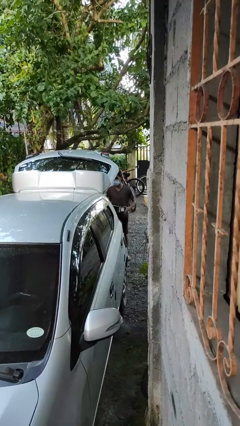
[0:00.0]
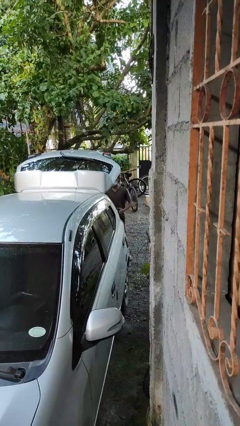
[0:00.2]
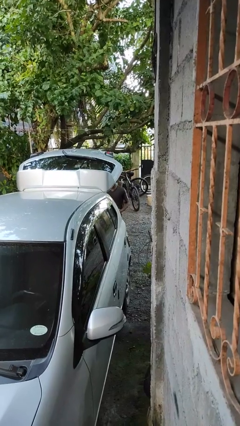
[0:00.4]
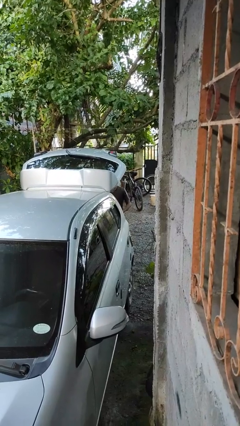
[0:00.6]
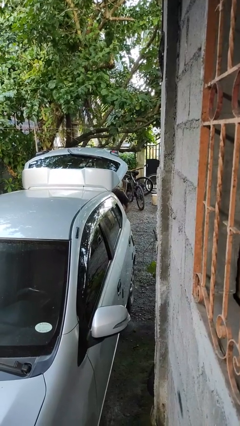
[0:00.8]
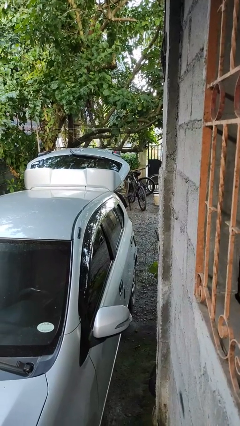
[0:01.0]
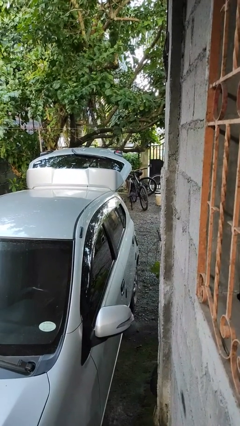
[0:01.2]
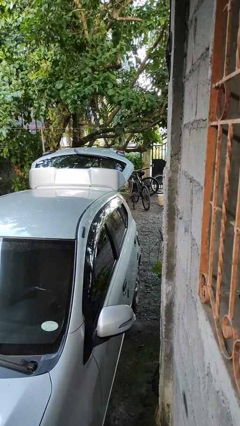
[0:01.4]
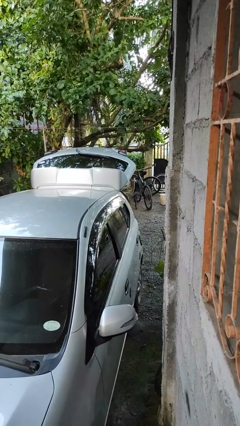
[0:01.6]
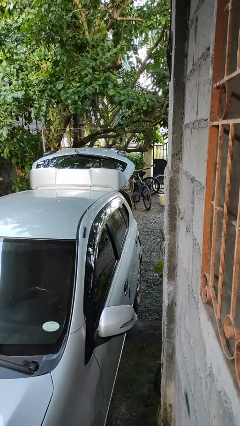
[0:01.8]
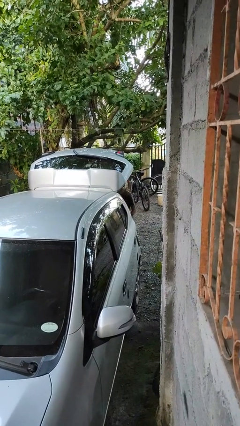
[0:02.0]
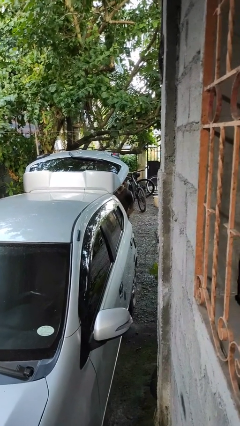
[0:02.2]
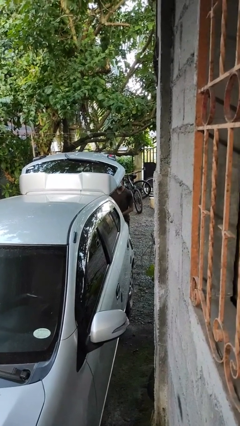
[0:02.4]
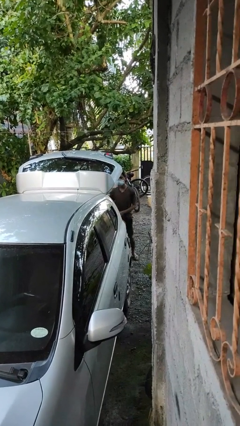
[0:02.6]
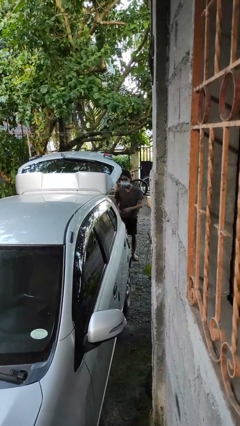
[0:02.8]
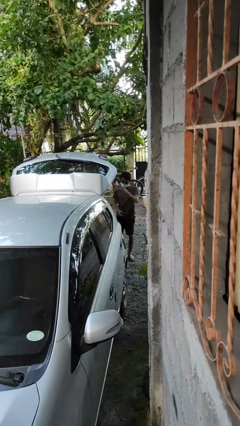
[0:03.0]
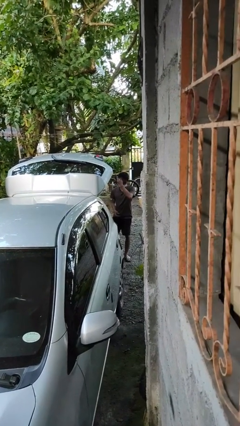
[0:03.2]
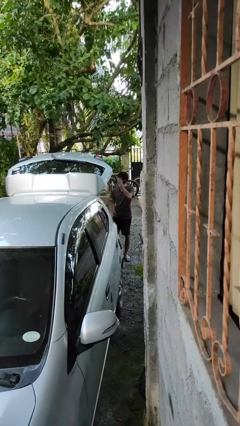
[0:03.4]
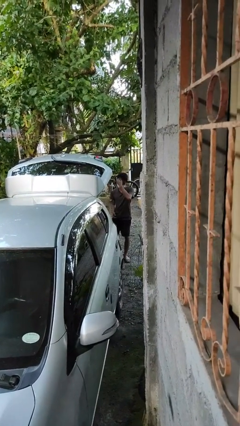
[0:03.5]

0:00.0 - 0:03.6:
person loads car

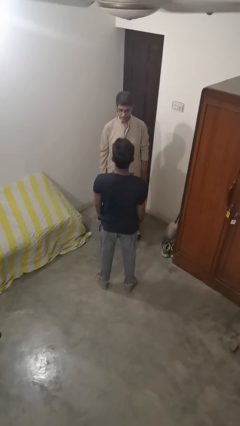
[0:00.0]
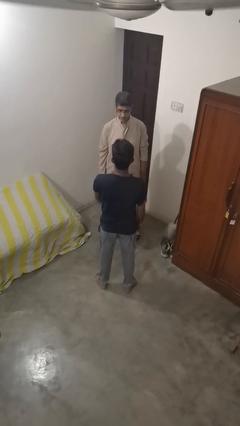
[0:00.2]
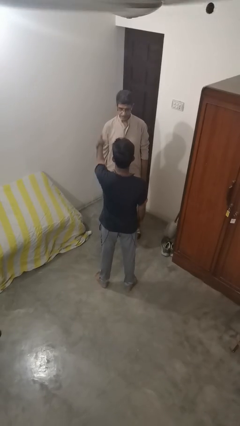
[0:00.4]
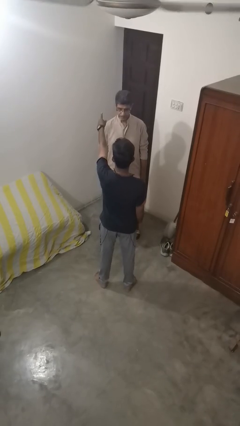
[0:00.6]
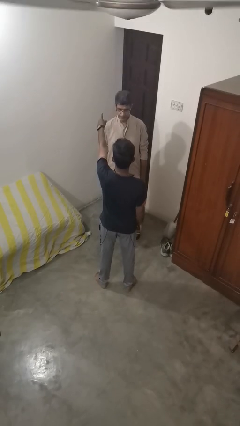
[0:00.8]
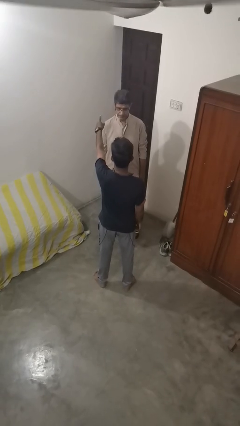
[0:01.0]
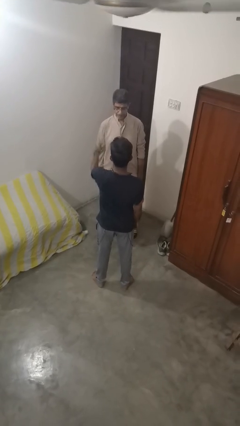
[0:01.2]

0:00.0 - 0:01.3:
person shoves person

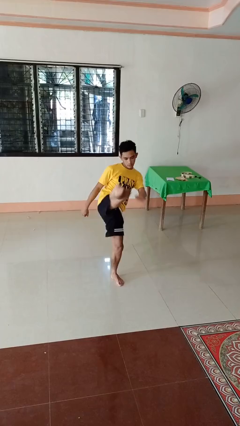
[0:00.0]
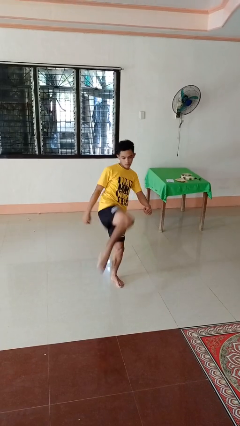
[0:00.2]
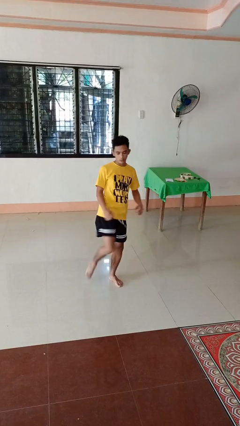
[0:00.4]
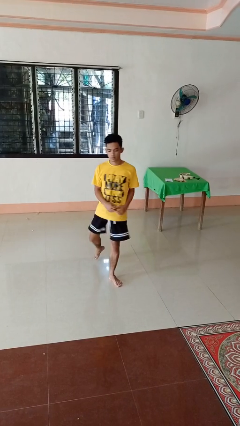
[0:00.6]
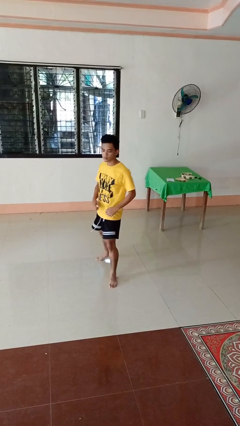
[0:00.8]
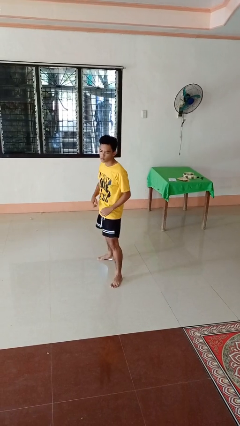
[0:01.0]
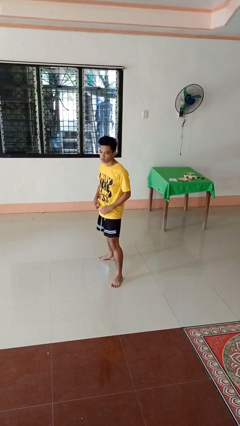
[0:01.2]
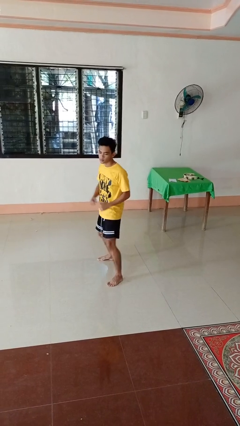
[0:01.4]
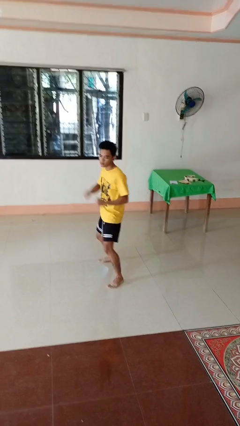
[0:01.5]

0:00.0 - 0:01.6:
person karate kicks

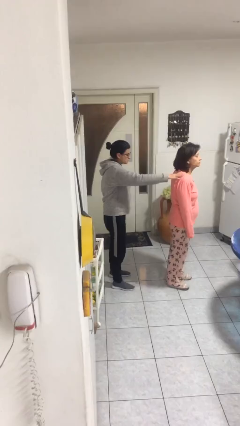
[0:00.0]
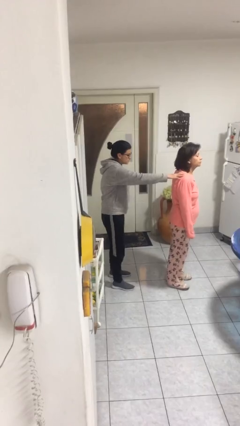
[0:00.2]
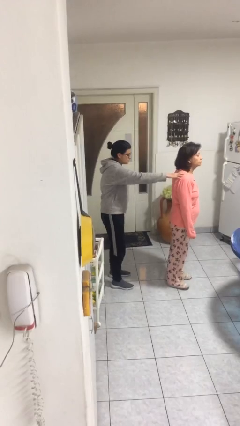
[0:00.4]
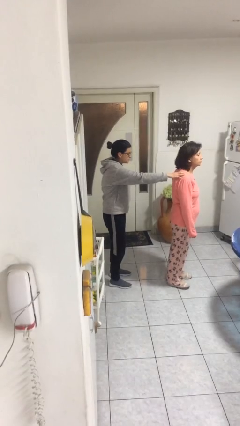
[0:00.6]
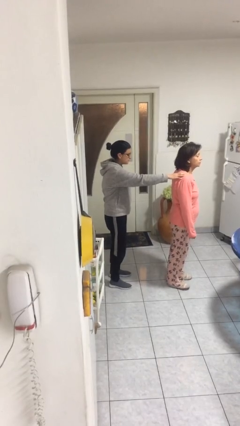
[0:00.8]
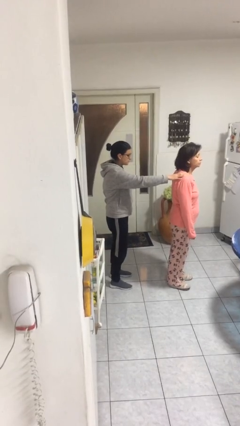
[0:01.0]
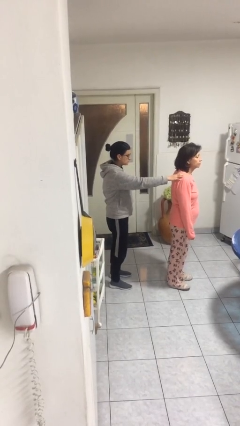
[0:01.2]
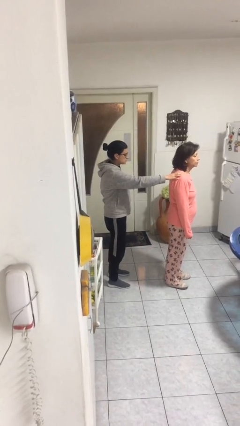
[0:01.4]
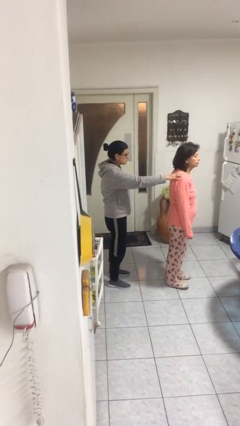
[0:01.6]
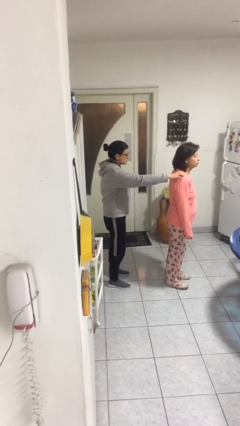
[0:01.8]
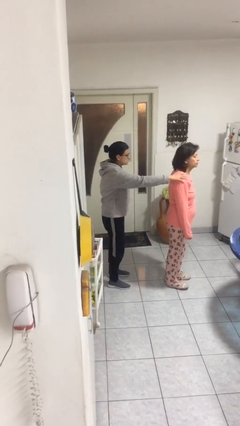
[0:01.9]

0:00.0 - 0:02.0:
person grabs person by shoulder

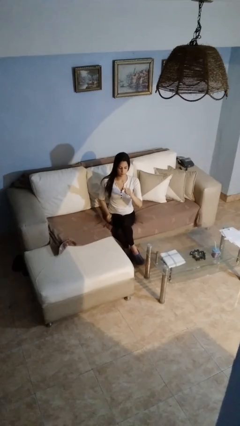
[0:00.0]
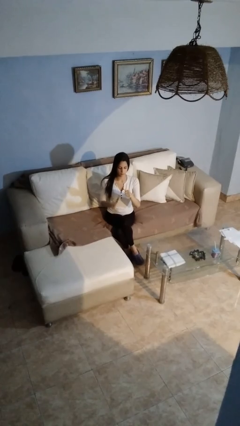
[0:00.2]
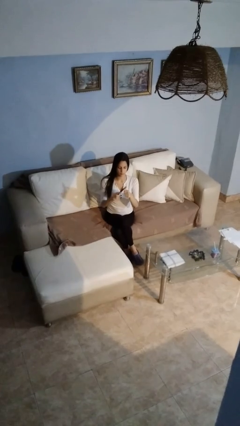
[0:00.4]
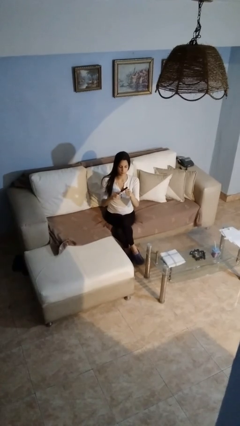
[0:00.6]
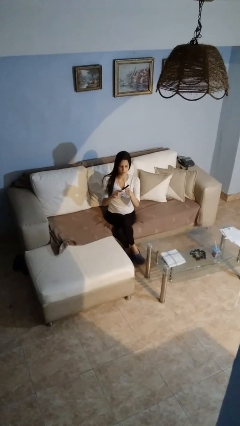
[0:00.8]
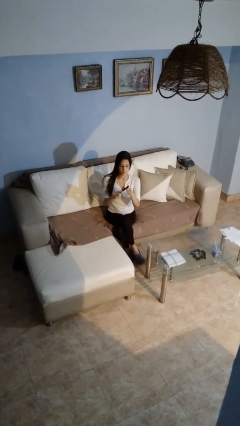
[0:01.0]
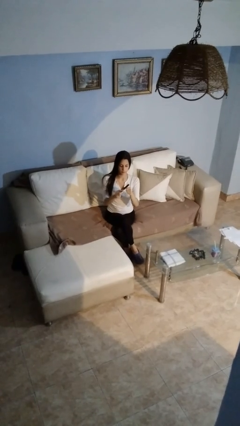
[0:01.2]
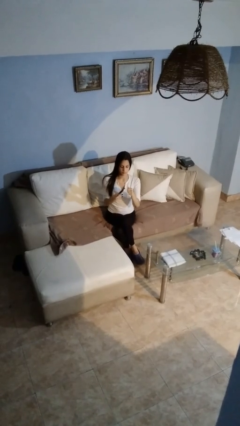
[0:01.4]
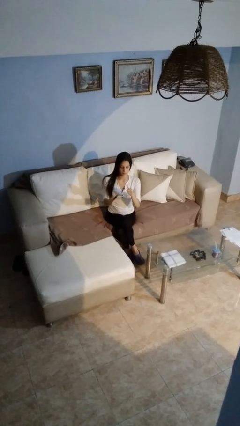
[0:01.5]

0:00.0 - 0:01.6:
person files fingernails

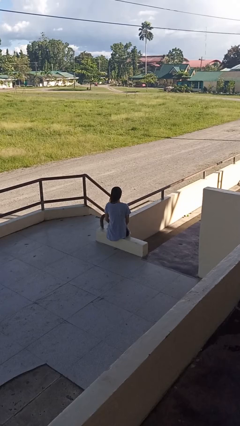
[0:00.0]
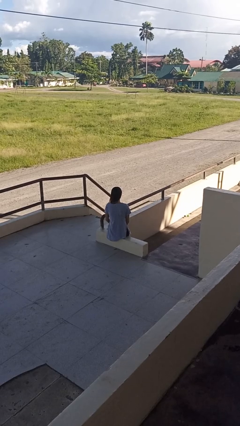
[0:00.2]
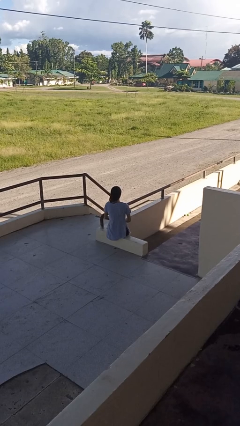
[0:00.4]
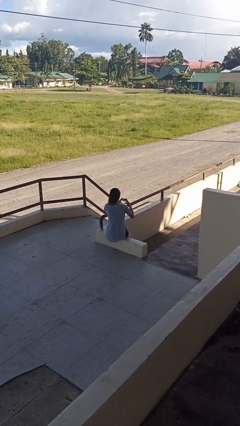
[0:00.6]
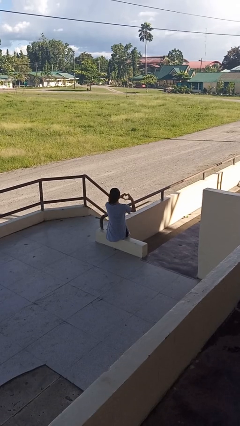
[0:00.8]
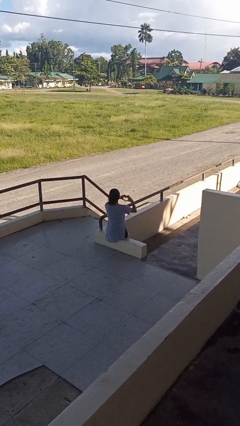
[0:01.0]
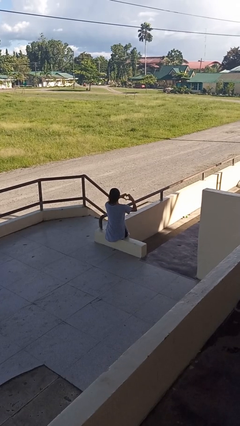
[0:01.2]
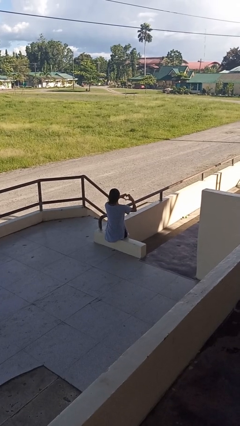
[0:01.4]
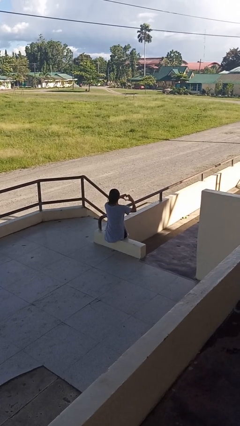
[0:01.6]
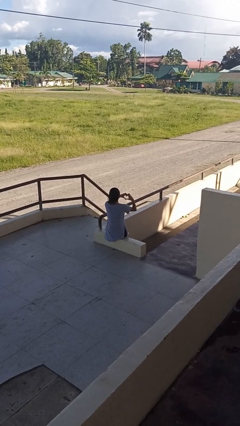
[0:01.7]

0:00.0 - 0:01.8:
person gestures heart

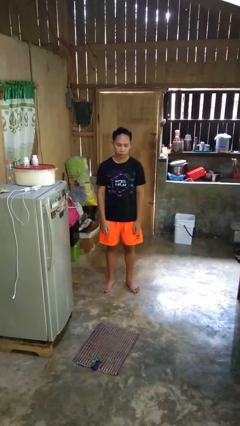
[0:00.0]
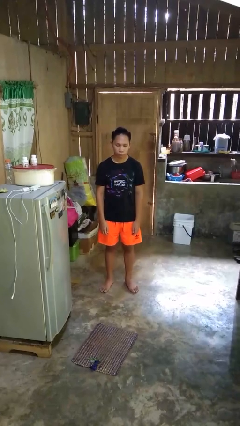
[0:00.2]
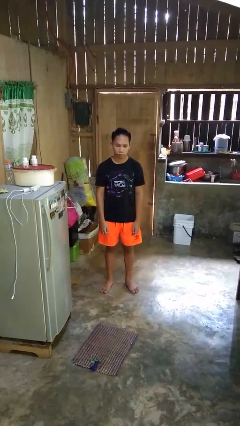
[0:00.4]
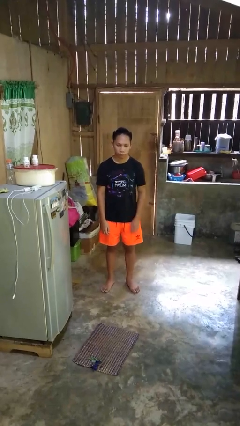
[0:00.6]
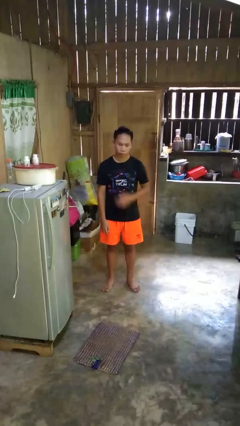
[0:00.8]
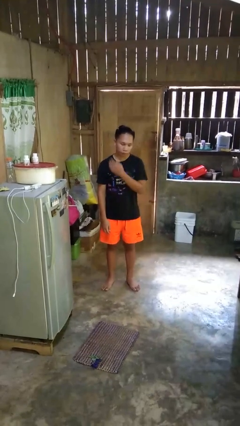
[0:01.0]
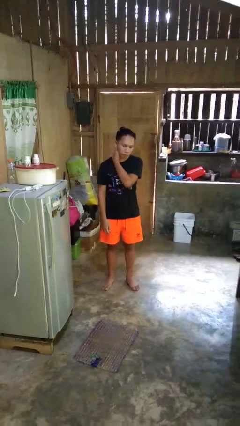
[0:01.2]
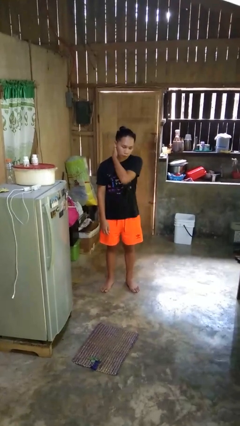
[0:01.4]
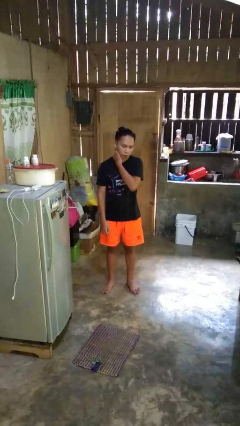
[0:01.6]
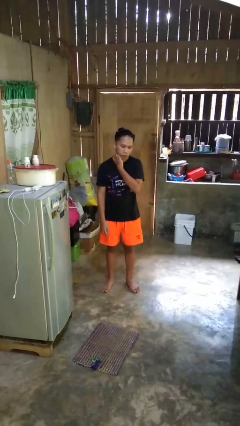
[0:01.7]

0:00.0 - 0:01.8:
person rubs neck

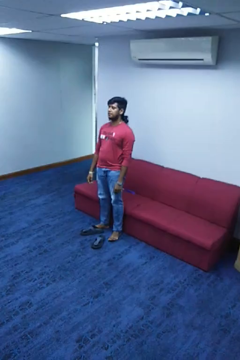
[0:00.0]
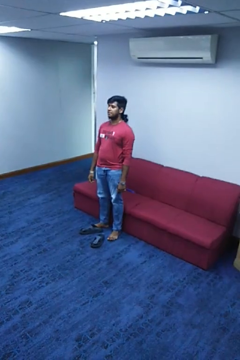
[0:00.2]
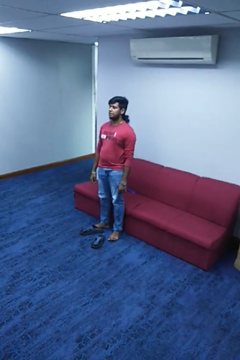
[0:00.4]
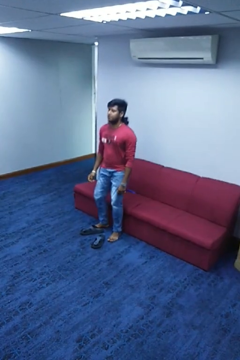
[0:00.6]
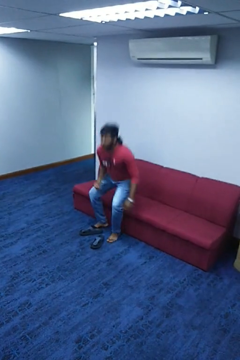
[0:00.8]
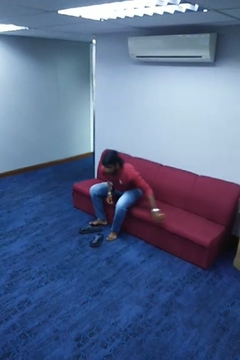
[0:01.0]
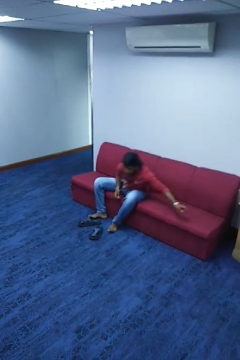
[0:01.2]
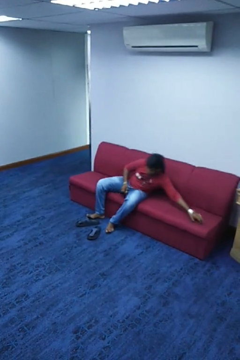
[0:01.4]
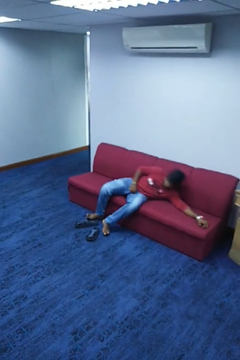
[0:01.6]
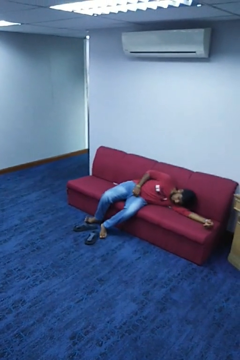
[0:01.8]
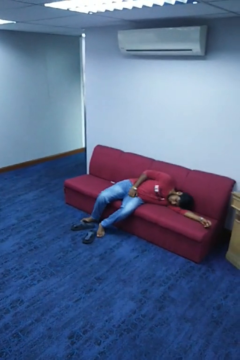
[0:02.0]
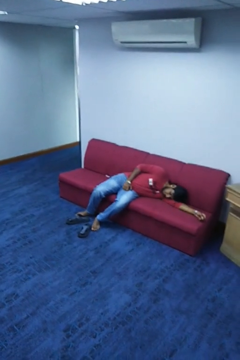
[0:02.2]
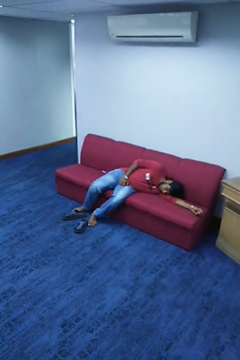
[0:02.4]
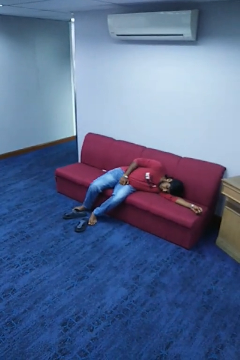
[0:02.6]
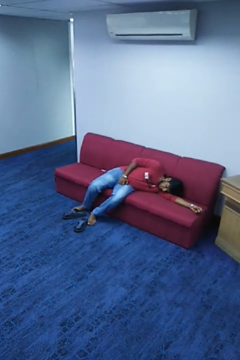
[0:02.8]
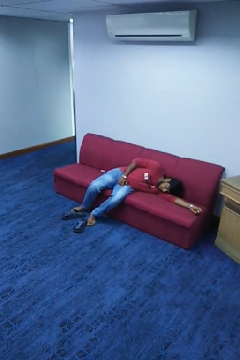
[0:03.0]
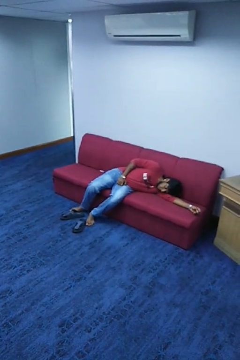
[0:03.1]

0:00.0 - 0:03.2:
person lies down on couch

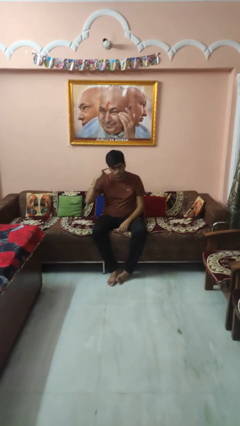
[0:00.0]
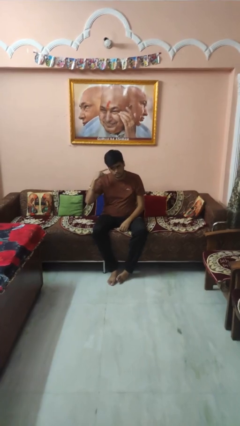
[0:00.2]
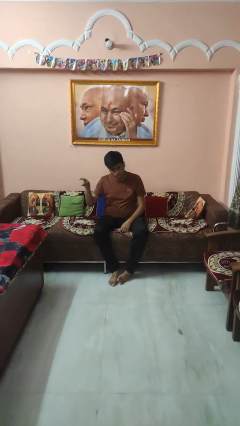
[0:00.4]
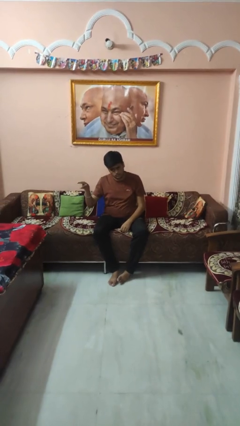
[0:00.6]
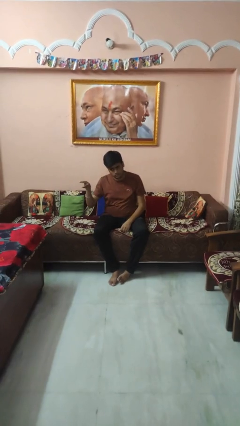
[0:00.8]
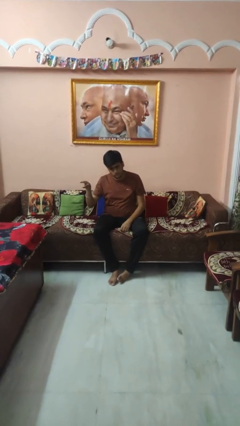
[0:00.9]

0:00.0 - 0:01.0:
person gestures listen closely
